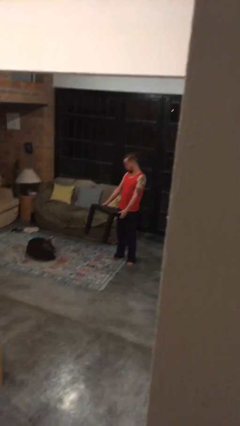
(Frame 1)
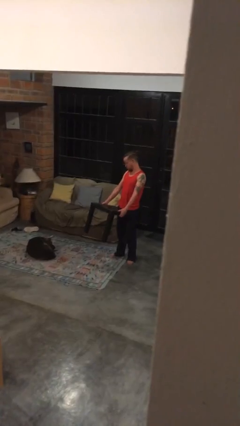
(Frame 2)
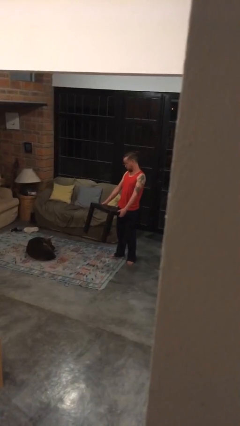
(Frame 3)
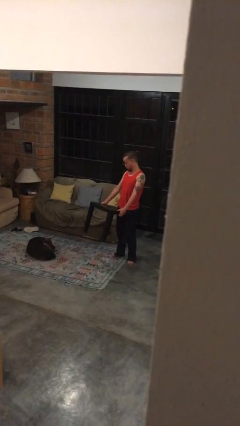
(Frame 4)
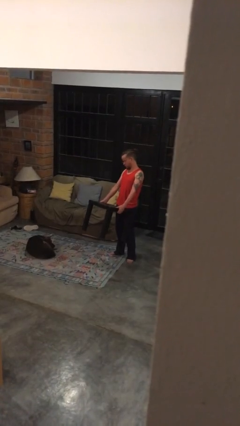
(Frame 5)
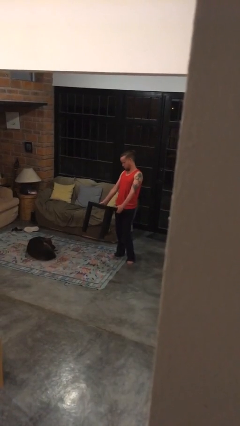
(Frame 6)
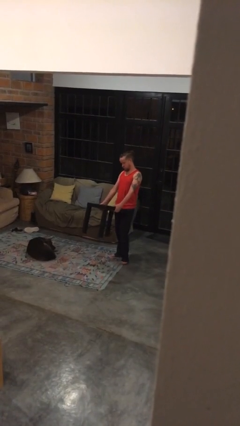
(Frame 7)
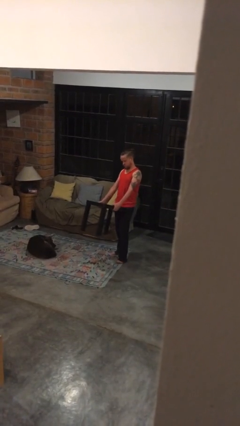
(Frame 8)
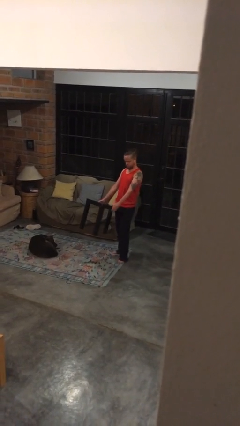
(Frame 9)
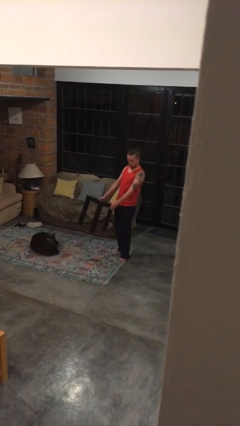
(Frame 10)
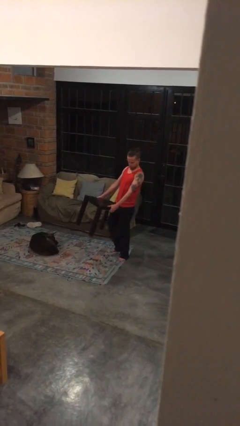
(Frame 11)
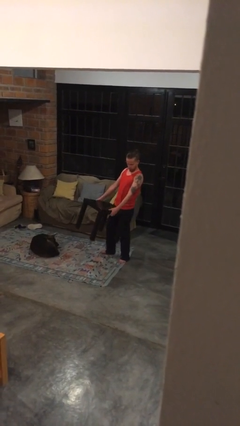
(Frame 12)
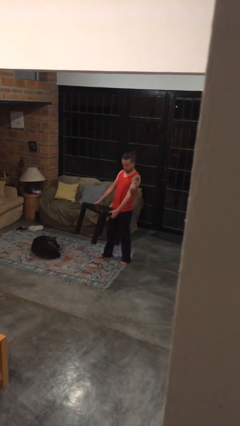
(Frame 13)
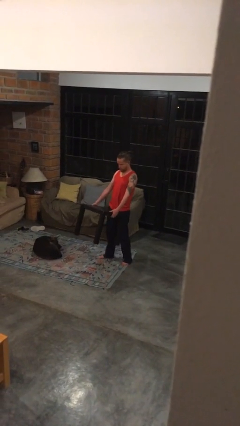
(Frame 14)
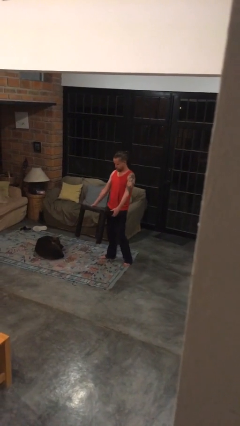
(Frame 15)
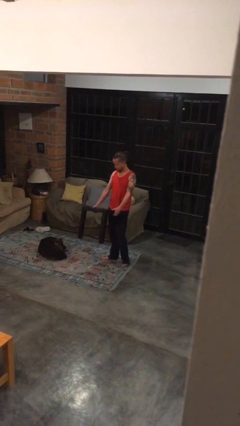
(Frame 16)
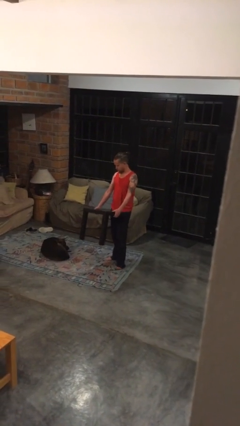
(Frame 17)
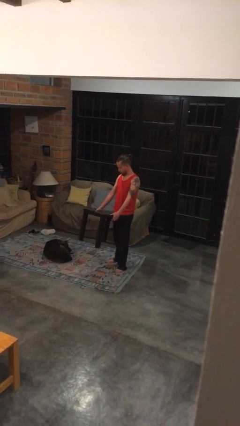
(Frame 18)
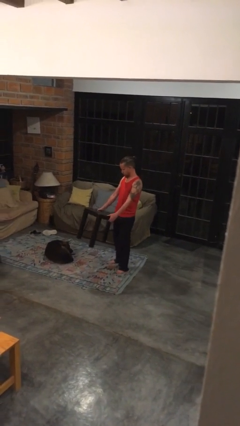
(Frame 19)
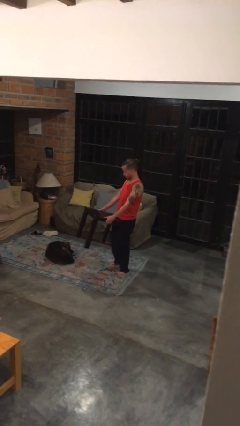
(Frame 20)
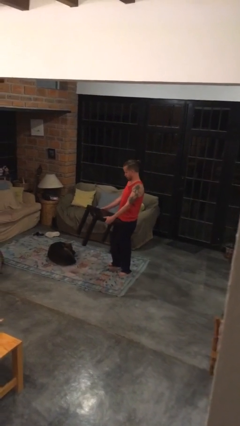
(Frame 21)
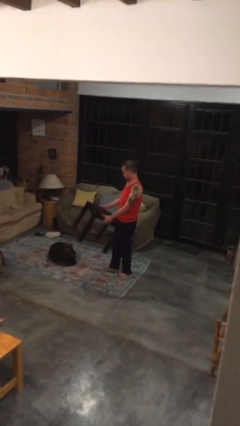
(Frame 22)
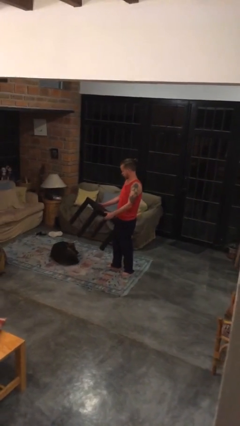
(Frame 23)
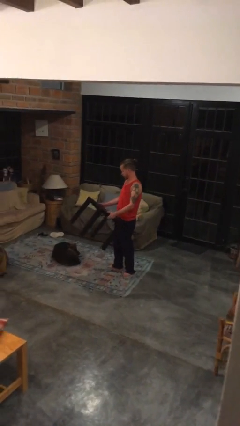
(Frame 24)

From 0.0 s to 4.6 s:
person carries furniture

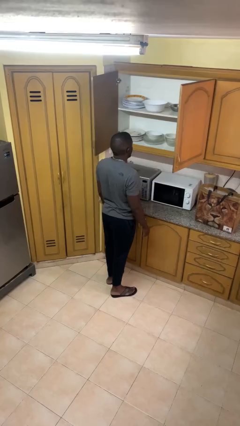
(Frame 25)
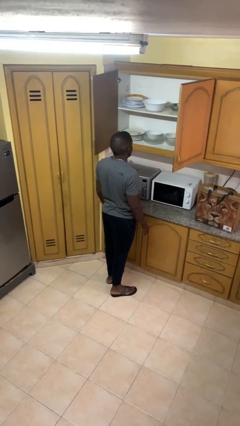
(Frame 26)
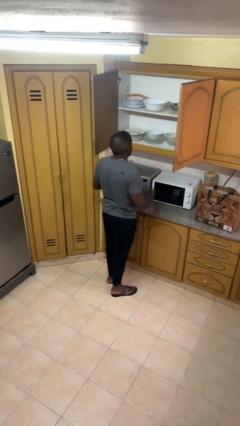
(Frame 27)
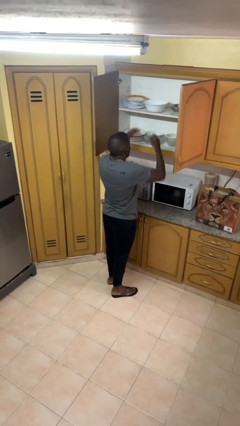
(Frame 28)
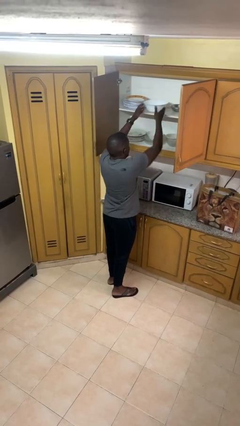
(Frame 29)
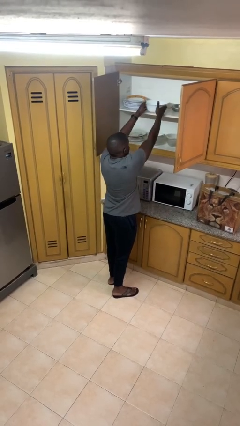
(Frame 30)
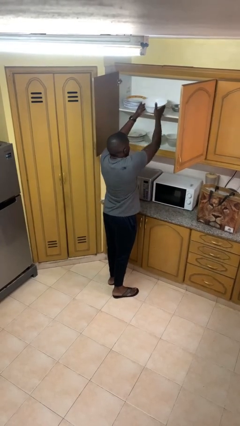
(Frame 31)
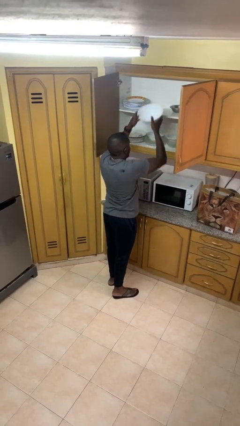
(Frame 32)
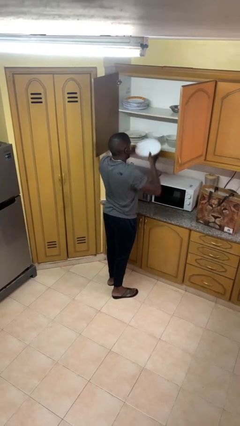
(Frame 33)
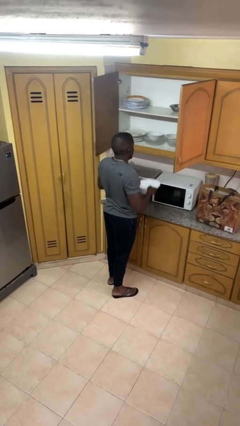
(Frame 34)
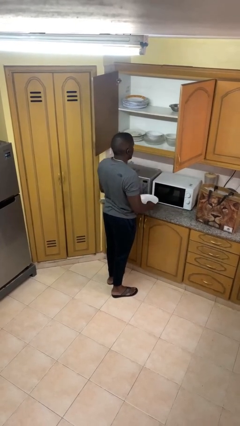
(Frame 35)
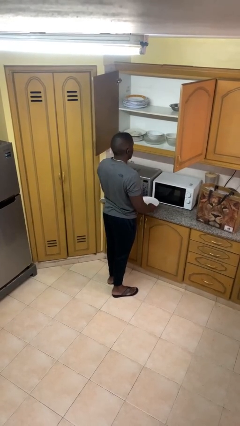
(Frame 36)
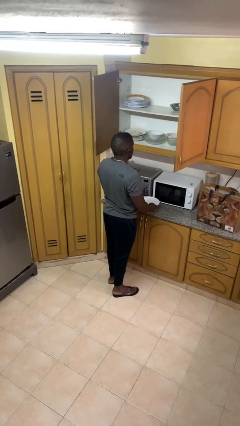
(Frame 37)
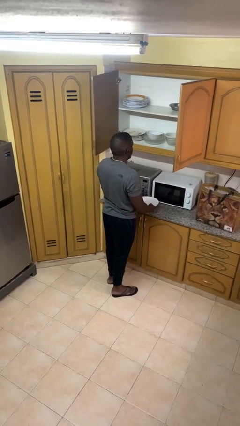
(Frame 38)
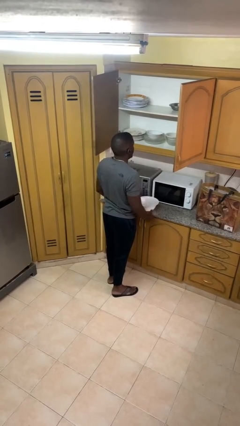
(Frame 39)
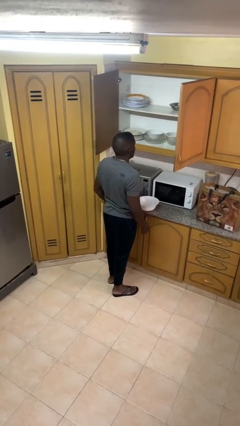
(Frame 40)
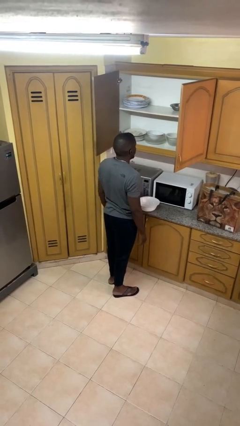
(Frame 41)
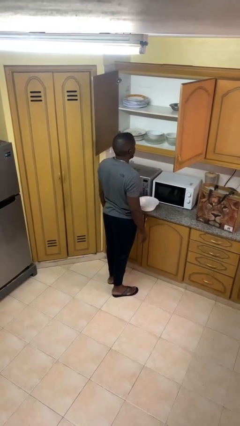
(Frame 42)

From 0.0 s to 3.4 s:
person takes object from cabinet

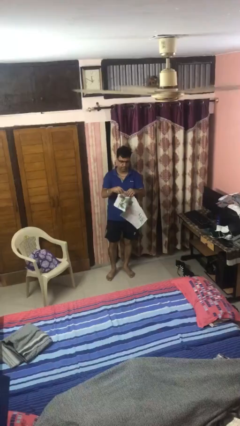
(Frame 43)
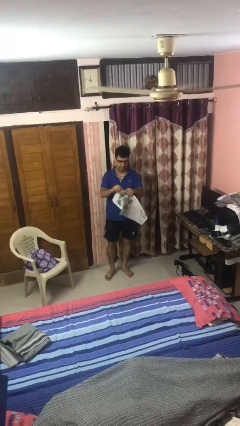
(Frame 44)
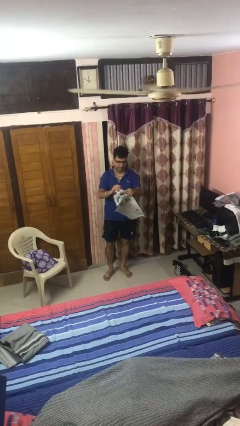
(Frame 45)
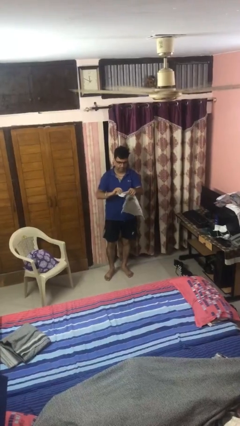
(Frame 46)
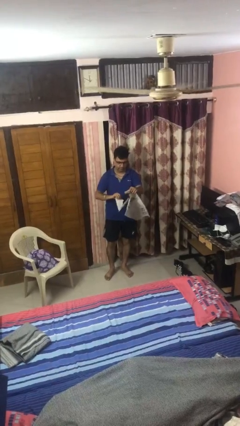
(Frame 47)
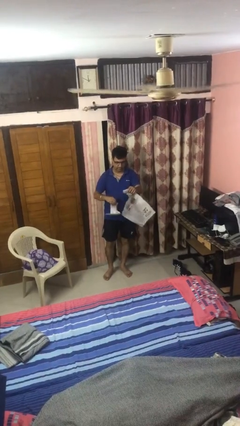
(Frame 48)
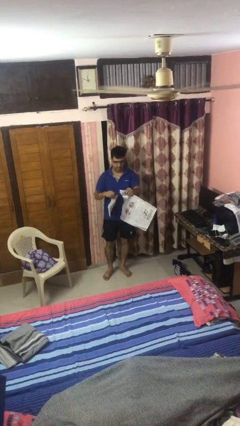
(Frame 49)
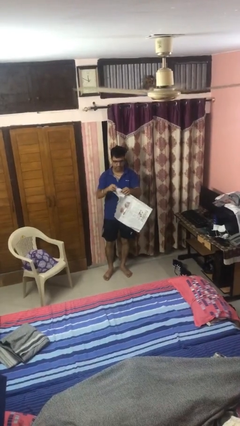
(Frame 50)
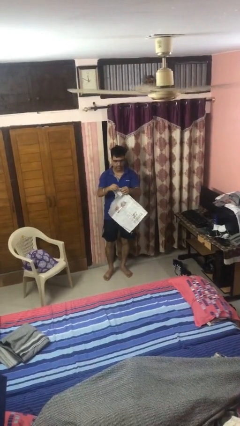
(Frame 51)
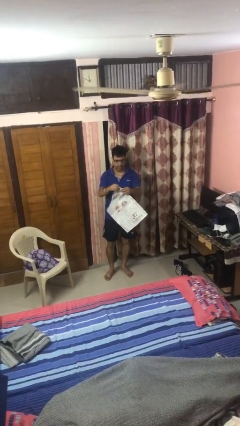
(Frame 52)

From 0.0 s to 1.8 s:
person tears paper

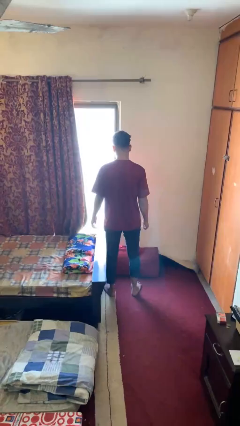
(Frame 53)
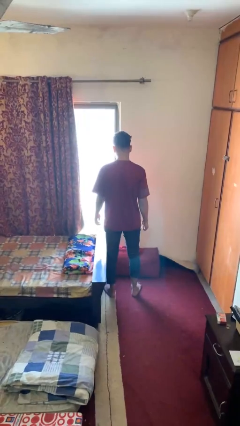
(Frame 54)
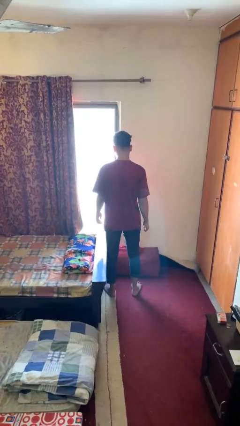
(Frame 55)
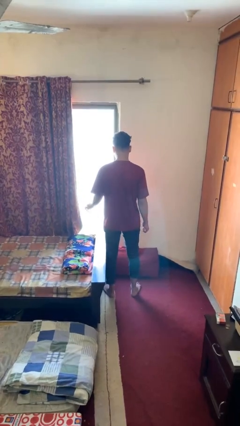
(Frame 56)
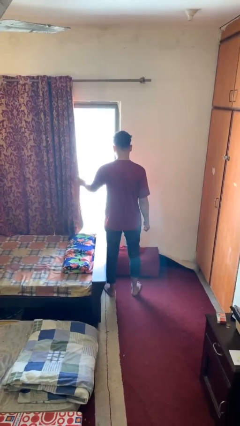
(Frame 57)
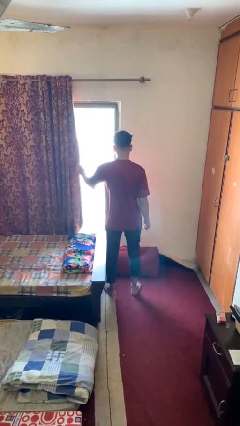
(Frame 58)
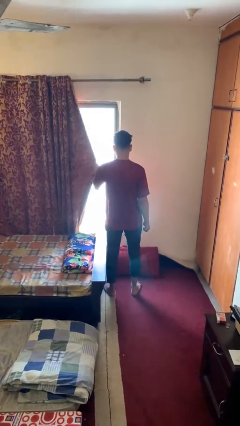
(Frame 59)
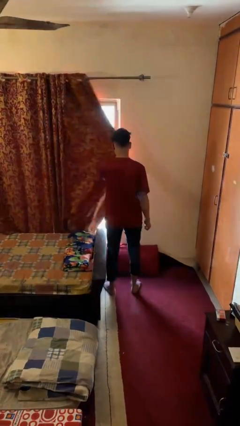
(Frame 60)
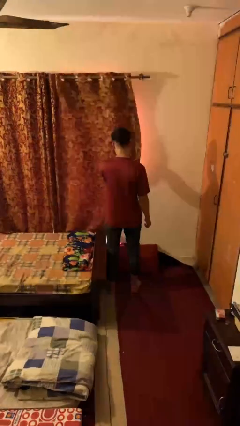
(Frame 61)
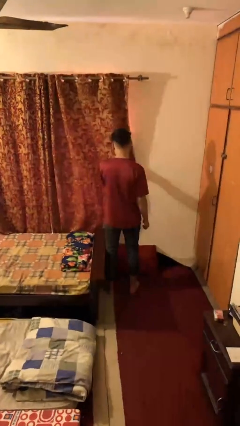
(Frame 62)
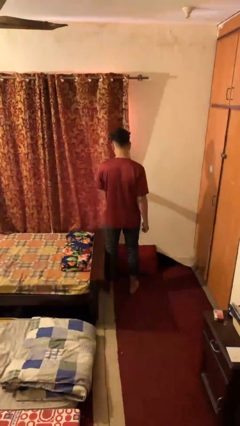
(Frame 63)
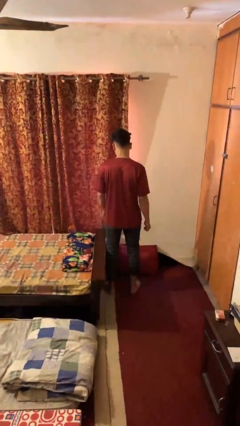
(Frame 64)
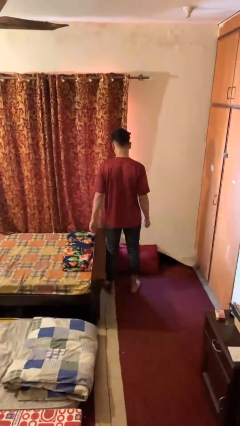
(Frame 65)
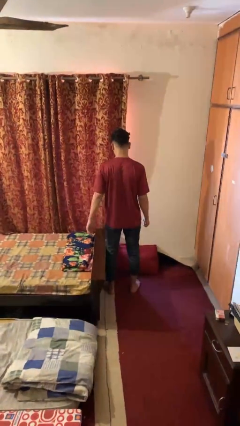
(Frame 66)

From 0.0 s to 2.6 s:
person closes curtains

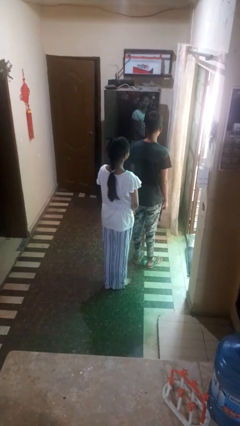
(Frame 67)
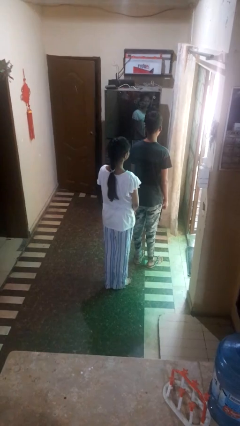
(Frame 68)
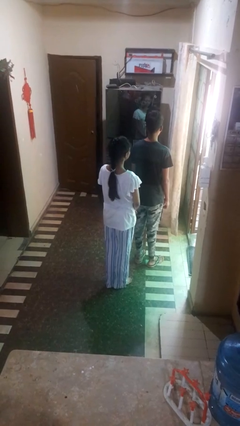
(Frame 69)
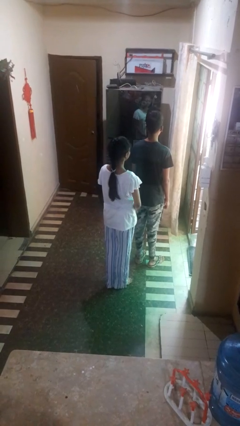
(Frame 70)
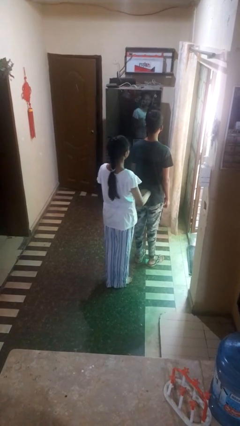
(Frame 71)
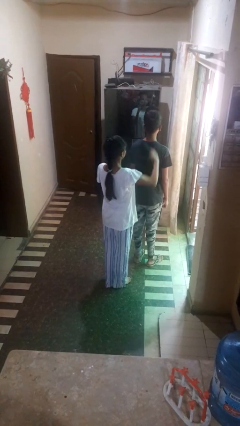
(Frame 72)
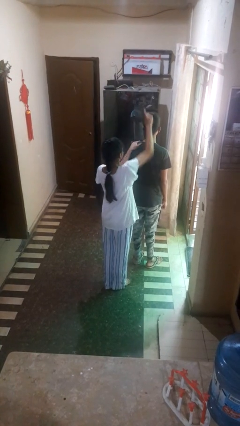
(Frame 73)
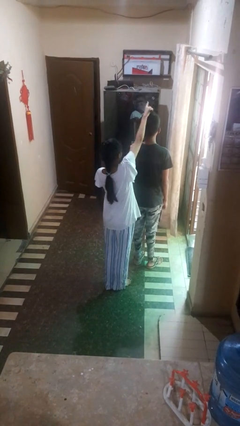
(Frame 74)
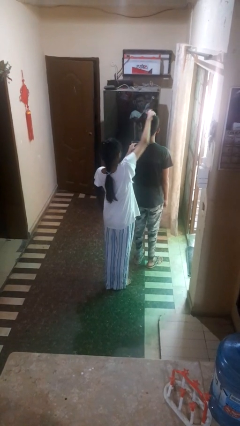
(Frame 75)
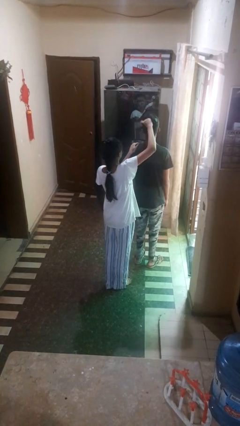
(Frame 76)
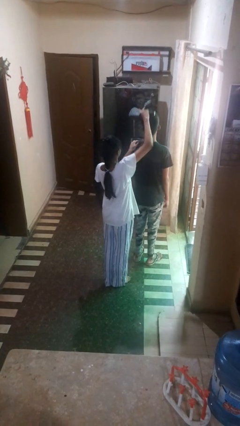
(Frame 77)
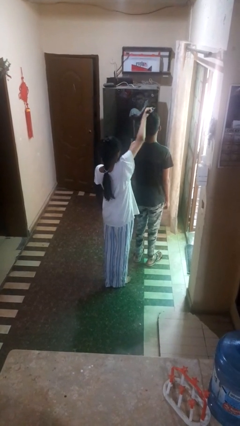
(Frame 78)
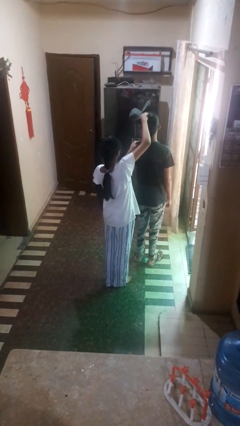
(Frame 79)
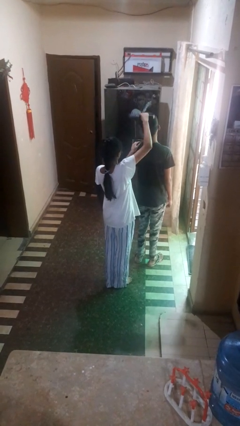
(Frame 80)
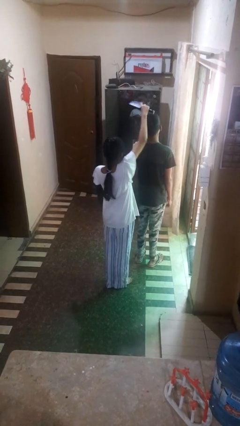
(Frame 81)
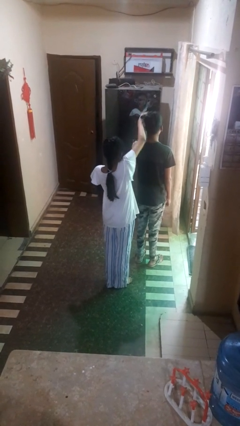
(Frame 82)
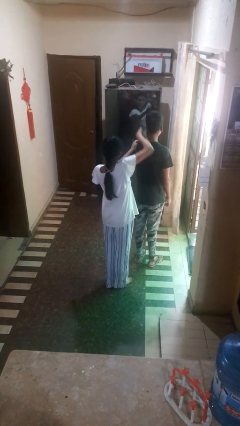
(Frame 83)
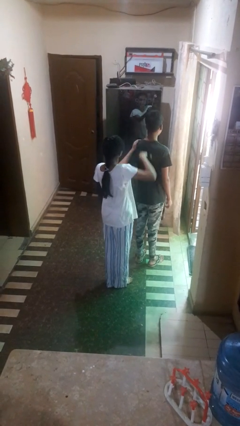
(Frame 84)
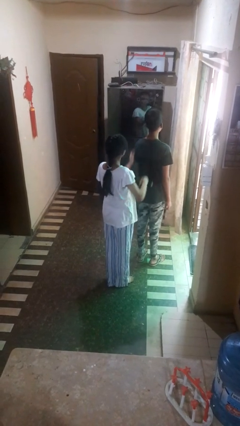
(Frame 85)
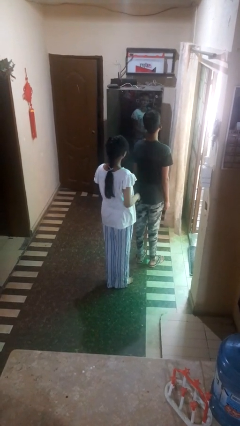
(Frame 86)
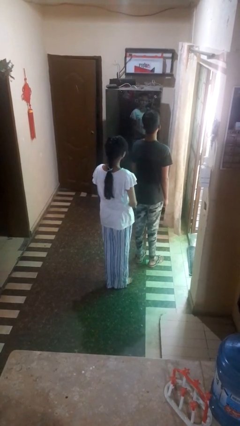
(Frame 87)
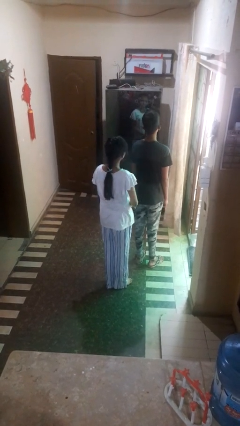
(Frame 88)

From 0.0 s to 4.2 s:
person brushes hair of person

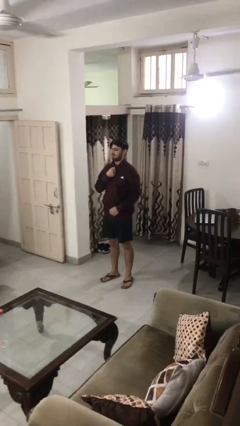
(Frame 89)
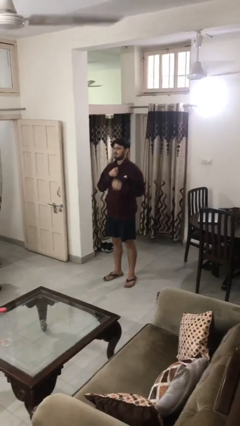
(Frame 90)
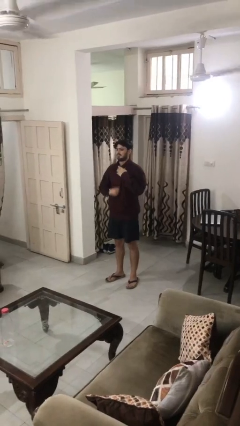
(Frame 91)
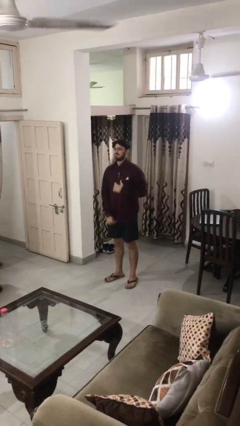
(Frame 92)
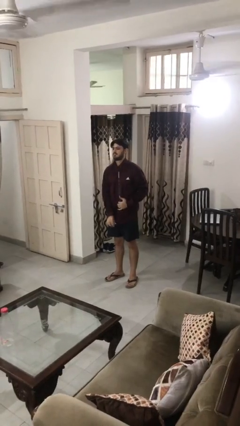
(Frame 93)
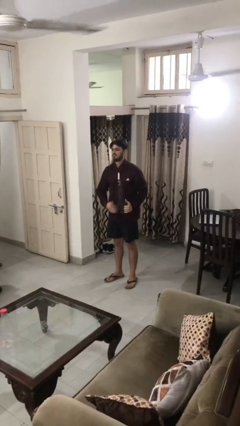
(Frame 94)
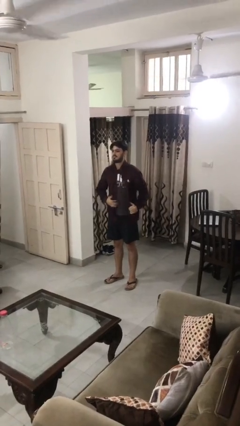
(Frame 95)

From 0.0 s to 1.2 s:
person unzips jacket
